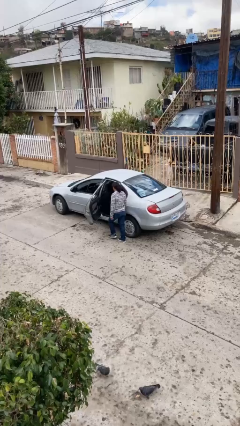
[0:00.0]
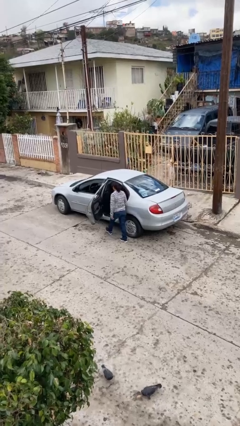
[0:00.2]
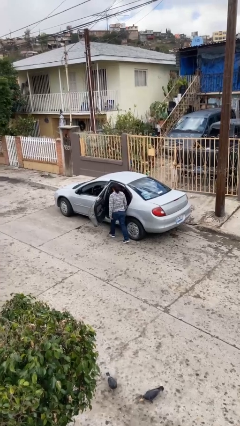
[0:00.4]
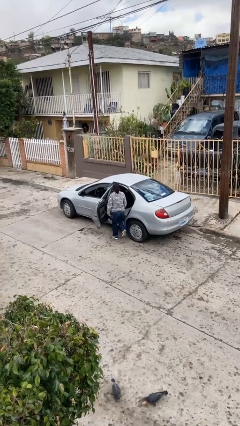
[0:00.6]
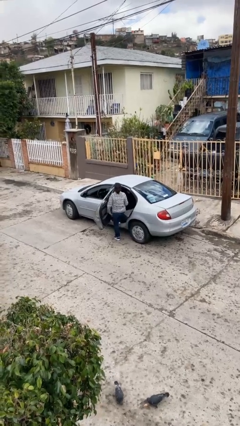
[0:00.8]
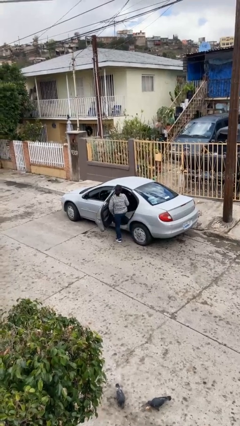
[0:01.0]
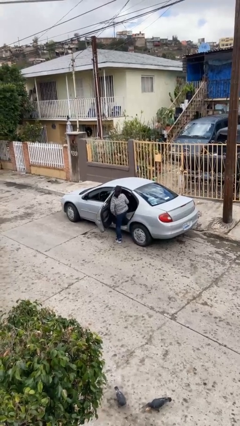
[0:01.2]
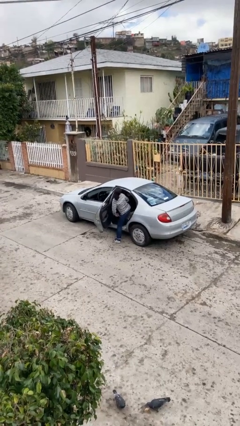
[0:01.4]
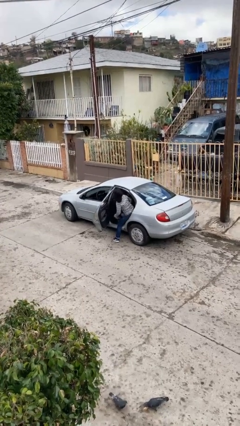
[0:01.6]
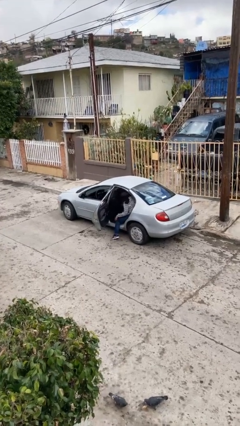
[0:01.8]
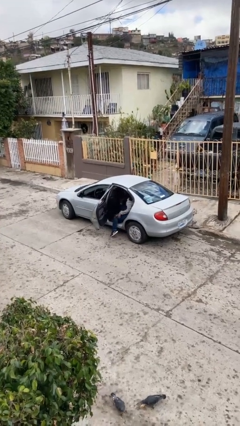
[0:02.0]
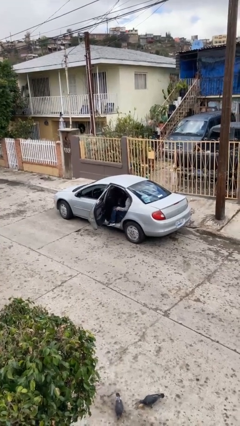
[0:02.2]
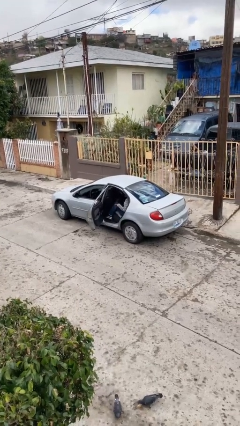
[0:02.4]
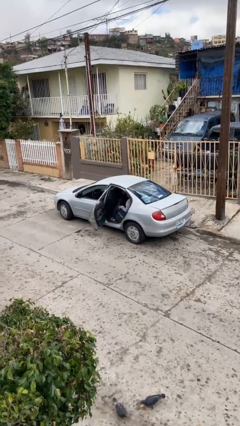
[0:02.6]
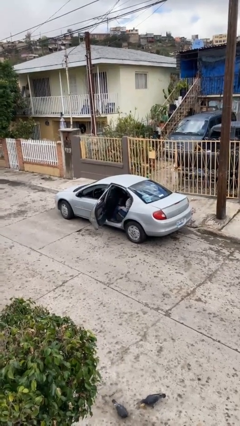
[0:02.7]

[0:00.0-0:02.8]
person enters car

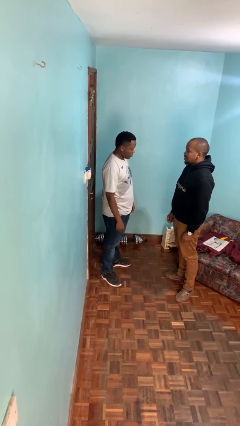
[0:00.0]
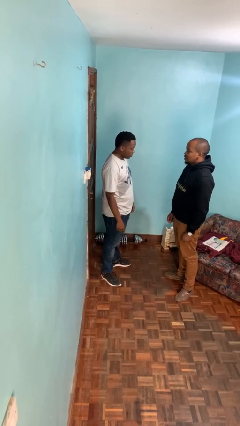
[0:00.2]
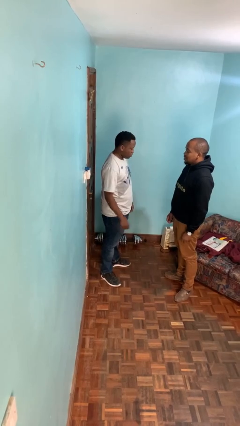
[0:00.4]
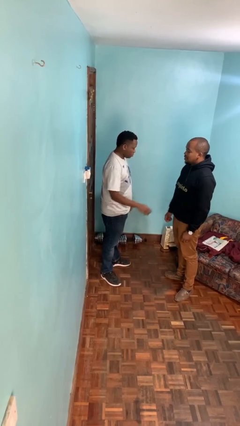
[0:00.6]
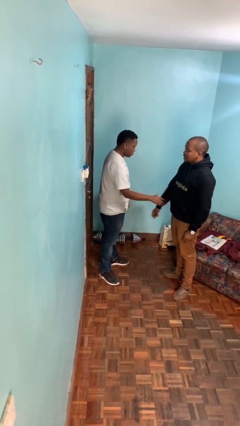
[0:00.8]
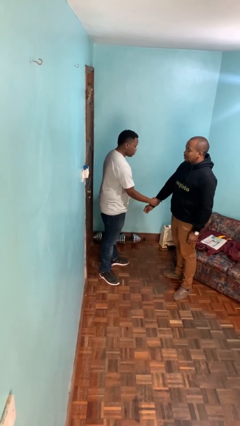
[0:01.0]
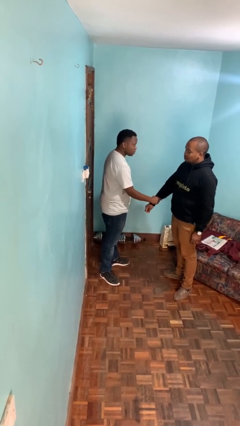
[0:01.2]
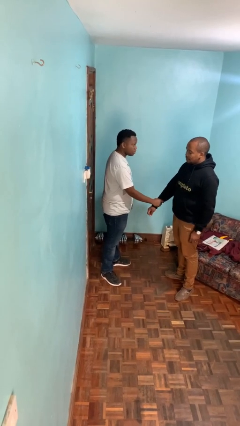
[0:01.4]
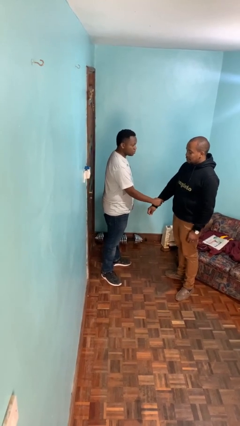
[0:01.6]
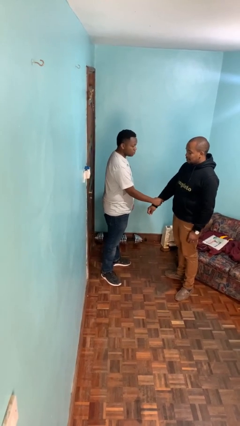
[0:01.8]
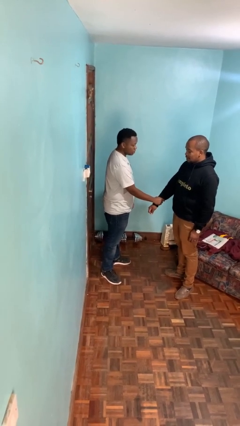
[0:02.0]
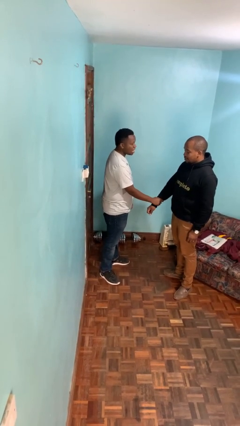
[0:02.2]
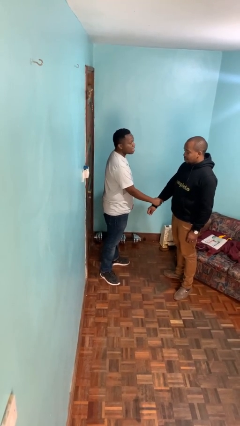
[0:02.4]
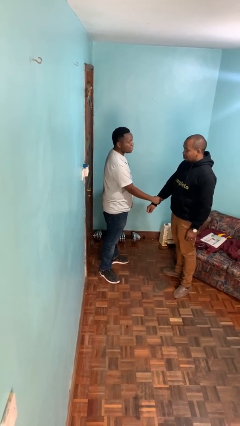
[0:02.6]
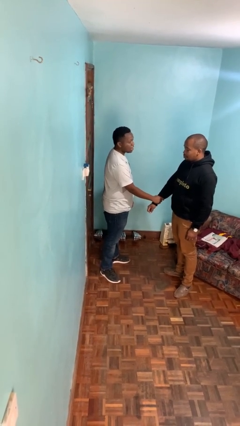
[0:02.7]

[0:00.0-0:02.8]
person grabs person by forearm

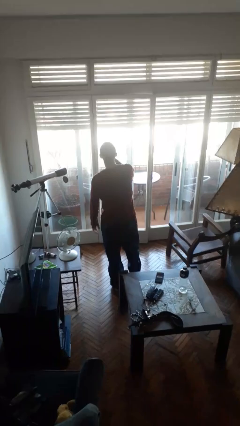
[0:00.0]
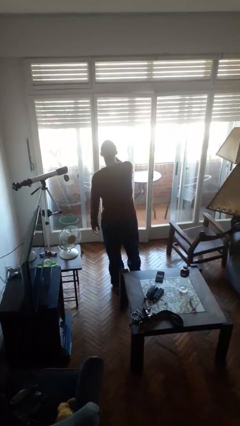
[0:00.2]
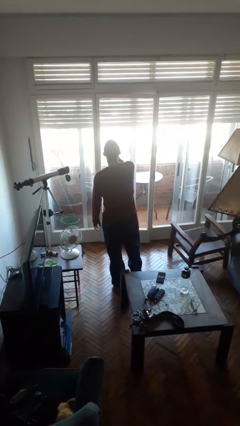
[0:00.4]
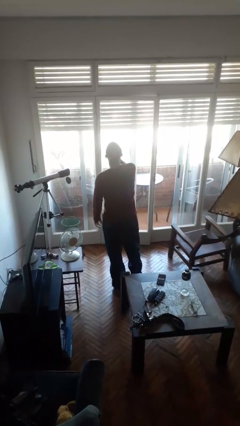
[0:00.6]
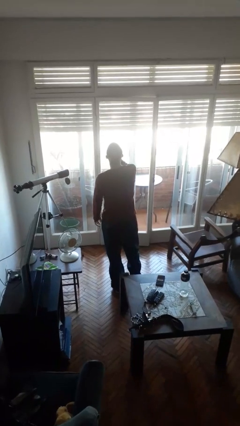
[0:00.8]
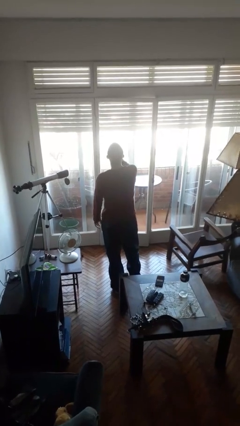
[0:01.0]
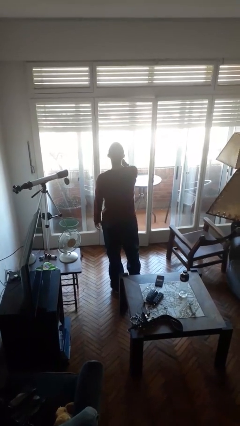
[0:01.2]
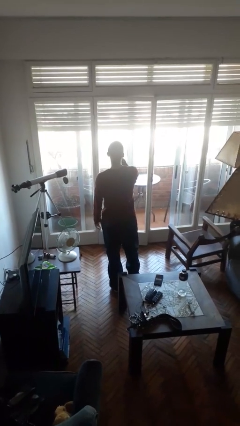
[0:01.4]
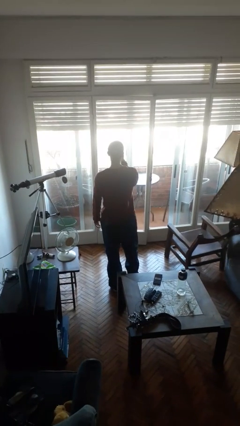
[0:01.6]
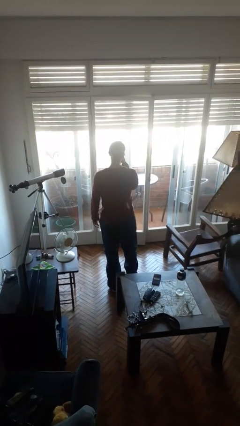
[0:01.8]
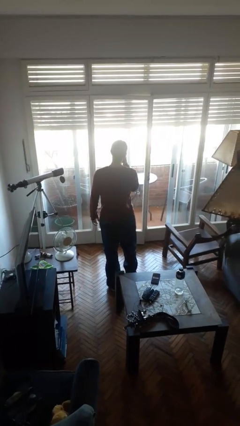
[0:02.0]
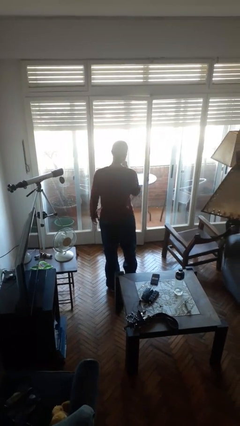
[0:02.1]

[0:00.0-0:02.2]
person yawns

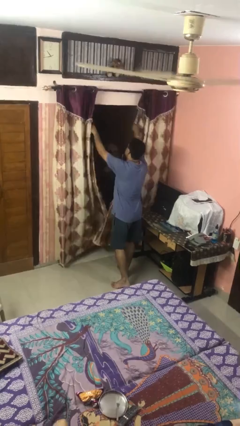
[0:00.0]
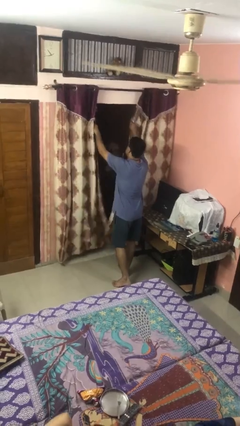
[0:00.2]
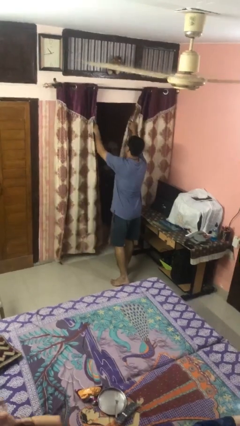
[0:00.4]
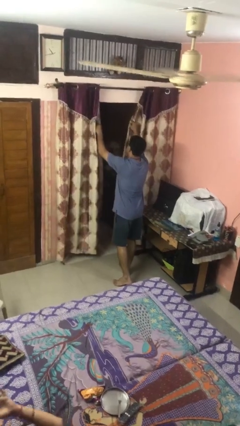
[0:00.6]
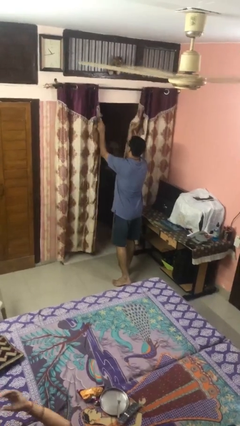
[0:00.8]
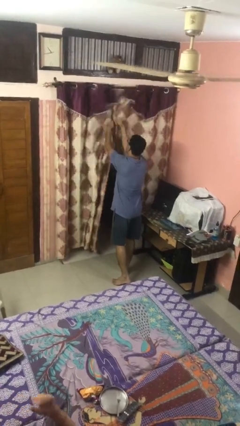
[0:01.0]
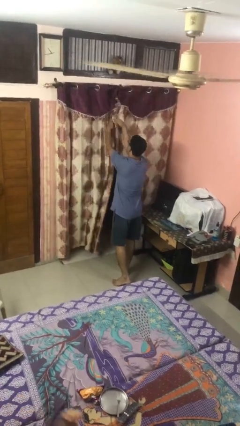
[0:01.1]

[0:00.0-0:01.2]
person closes curtains

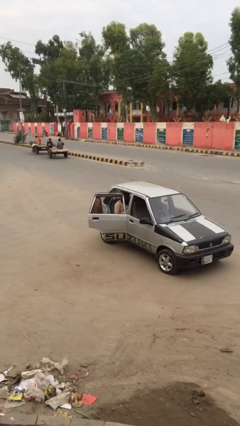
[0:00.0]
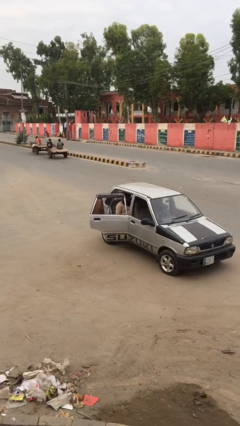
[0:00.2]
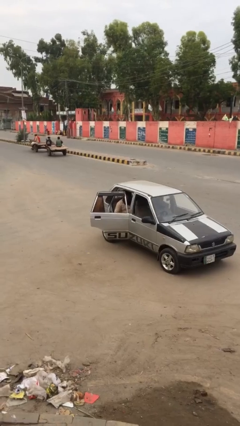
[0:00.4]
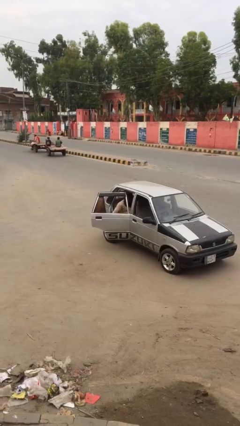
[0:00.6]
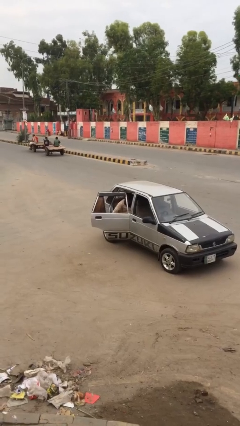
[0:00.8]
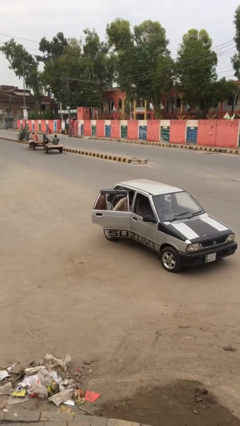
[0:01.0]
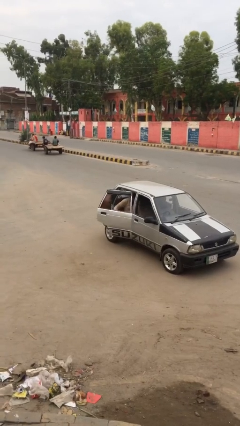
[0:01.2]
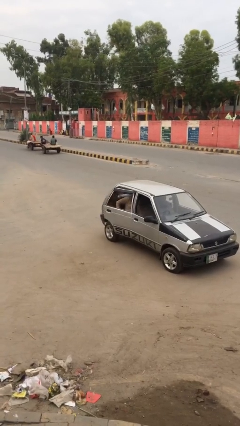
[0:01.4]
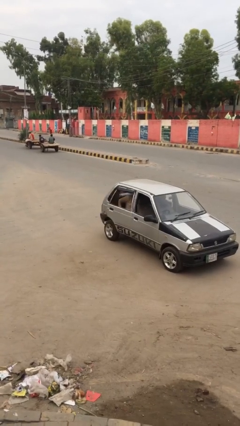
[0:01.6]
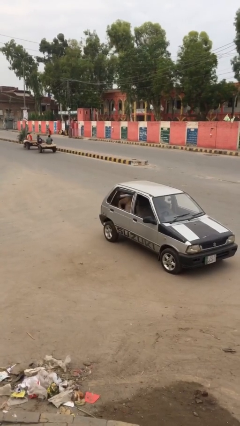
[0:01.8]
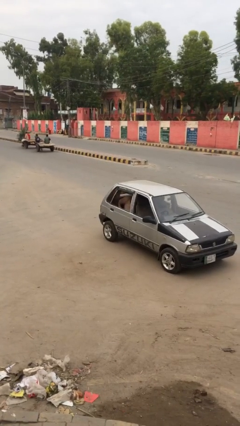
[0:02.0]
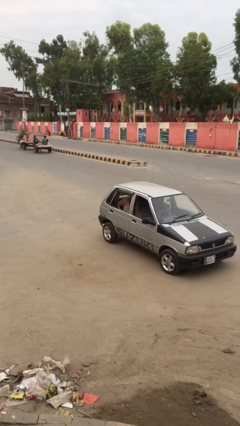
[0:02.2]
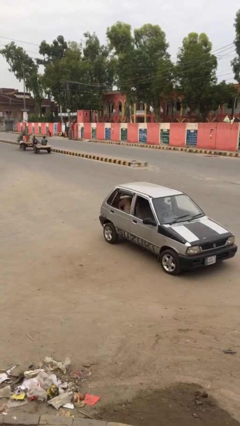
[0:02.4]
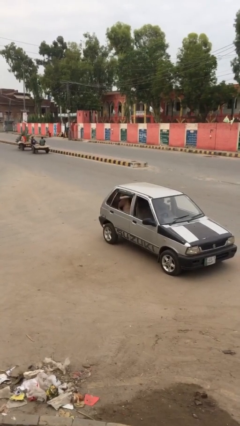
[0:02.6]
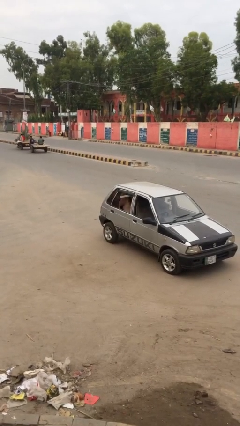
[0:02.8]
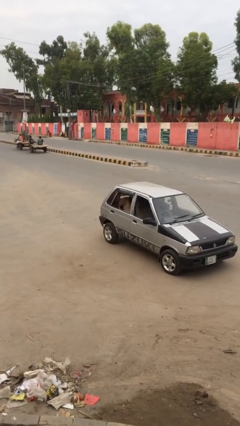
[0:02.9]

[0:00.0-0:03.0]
person closes car door

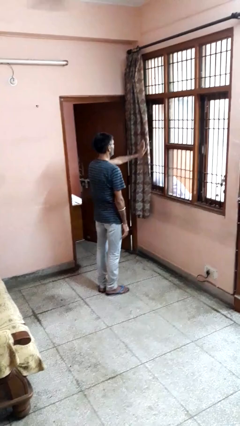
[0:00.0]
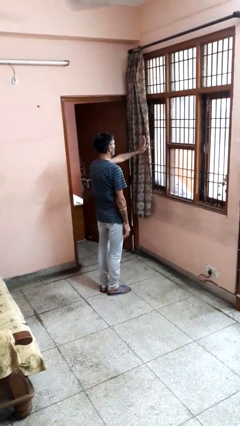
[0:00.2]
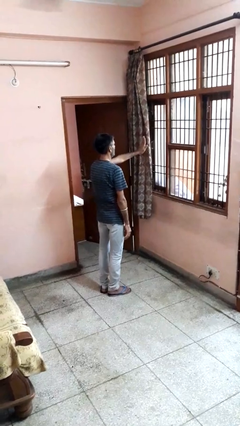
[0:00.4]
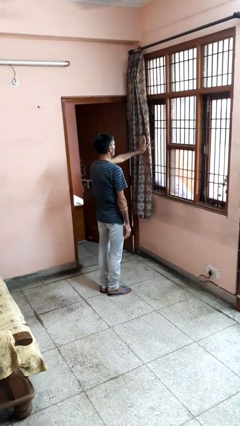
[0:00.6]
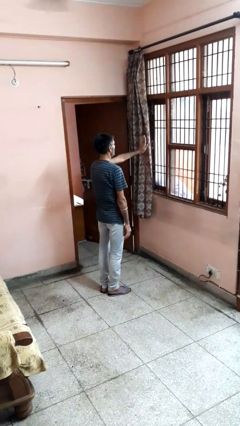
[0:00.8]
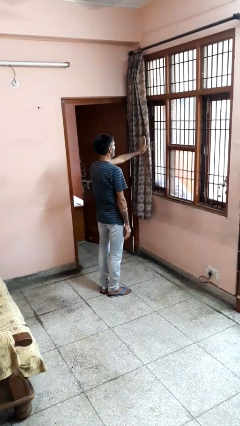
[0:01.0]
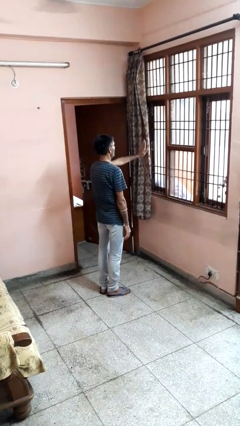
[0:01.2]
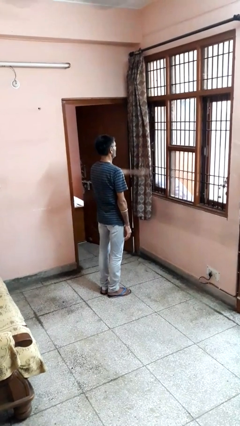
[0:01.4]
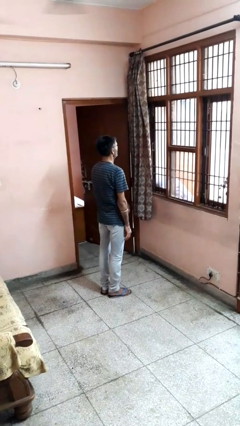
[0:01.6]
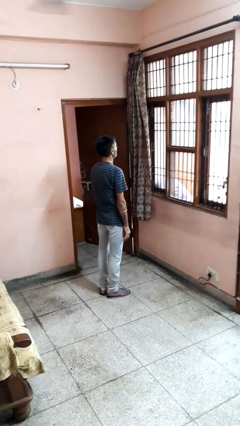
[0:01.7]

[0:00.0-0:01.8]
person gestures stop

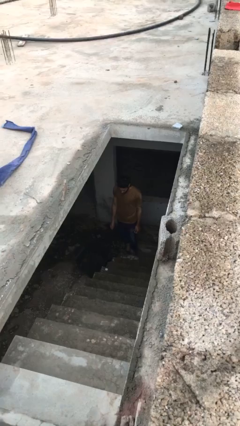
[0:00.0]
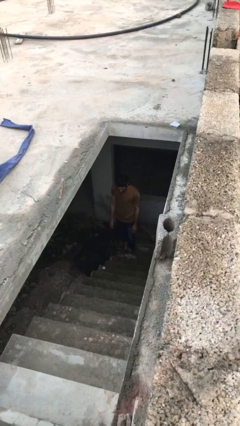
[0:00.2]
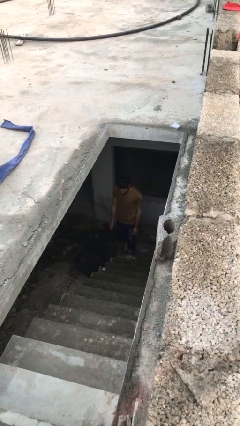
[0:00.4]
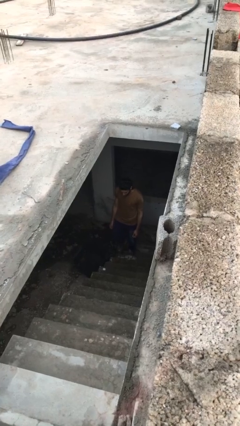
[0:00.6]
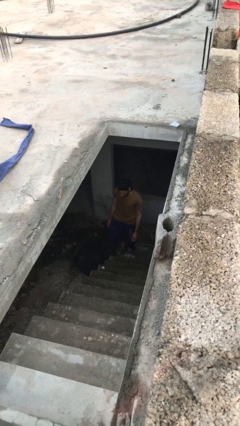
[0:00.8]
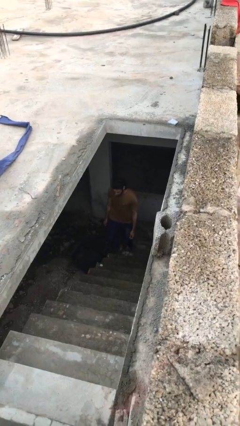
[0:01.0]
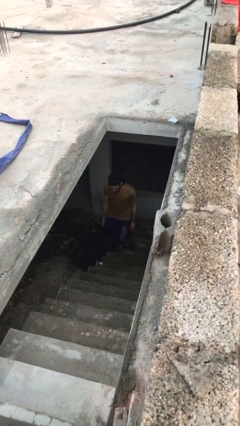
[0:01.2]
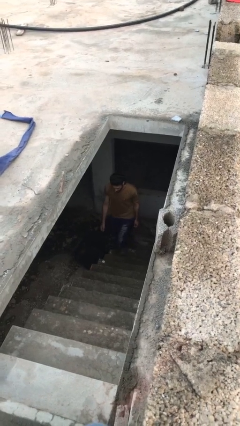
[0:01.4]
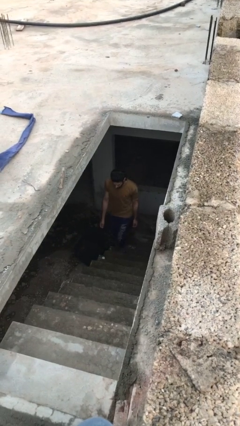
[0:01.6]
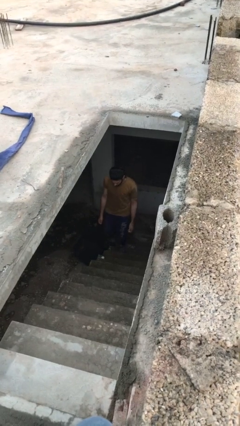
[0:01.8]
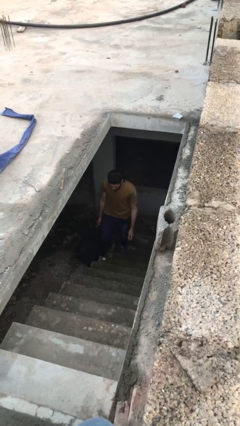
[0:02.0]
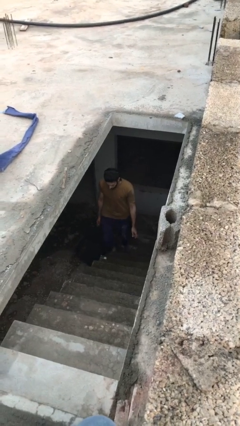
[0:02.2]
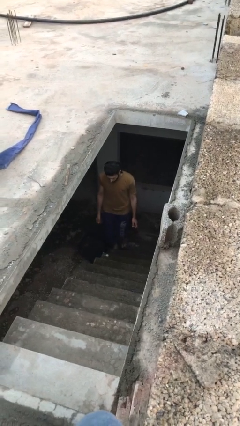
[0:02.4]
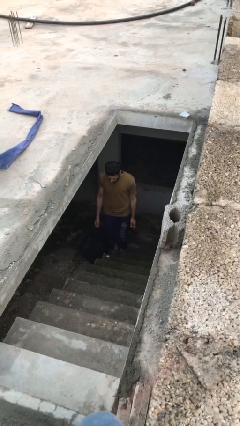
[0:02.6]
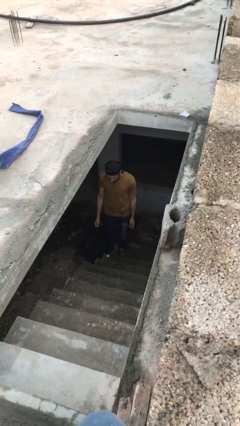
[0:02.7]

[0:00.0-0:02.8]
person climbs up stairs

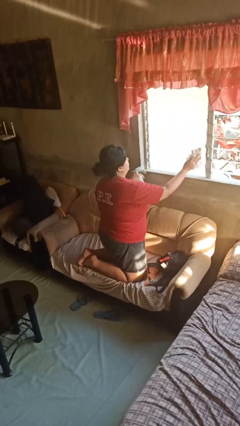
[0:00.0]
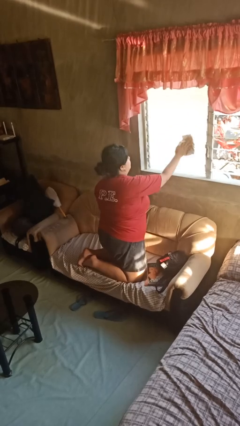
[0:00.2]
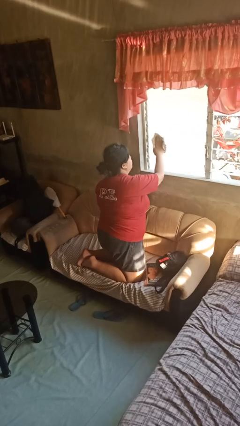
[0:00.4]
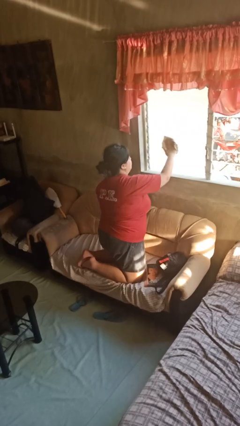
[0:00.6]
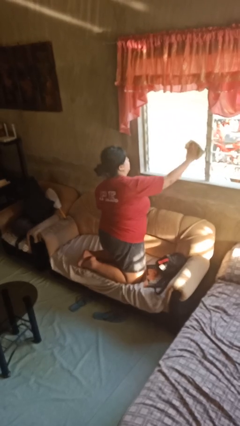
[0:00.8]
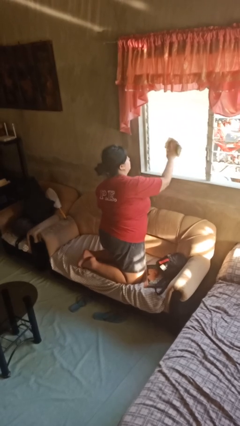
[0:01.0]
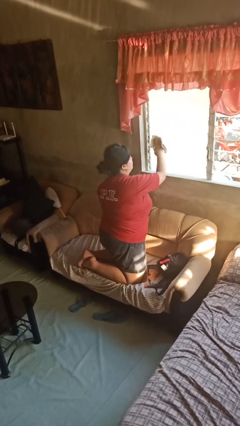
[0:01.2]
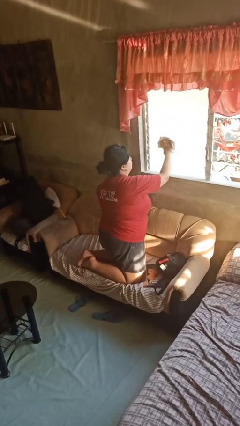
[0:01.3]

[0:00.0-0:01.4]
person washes window
